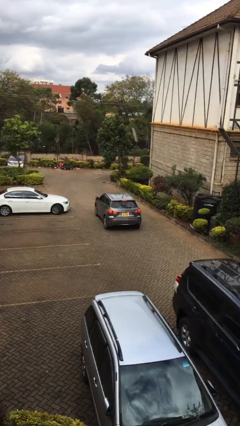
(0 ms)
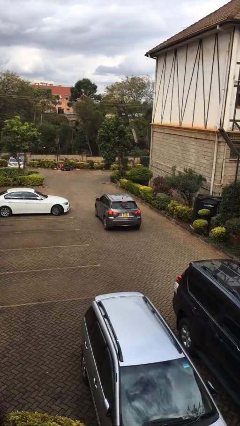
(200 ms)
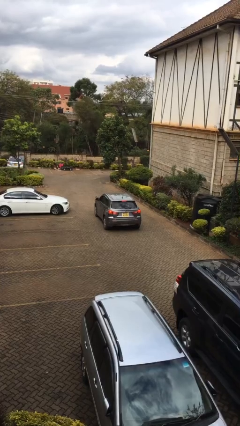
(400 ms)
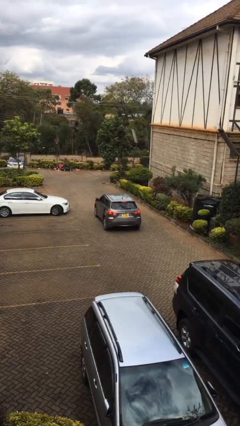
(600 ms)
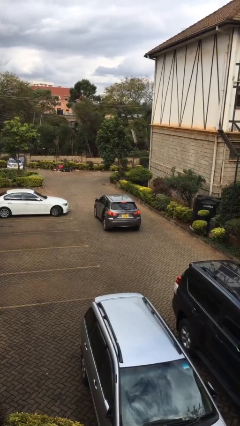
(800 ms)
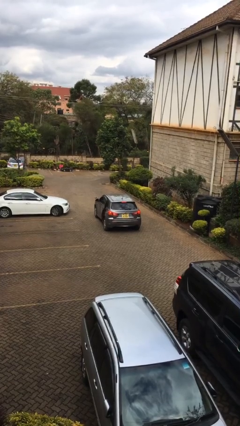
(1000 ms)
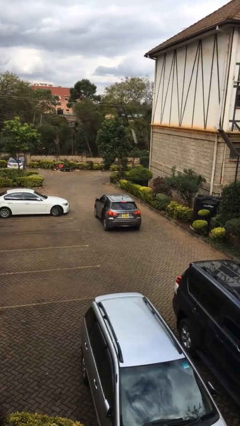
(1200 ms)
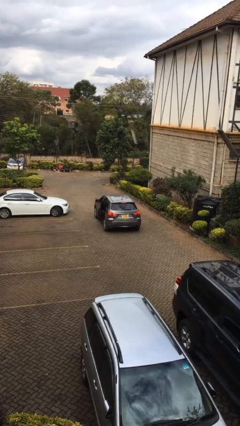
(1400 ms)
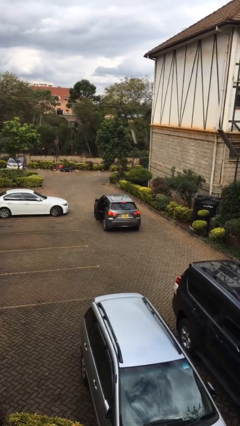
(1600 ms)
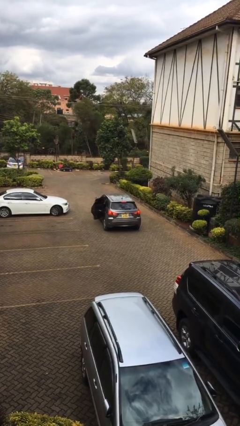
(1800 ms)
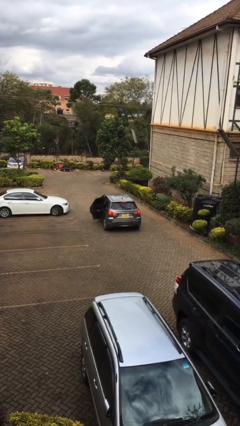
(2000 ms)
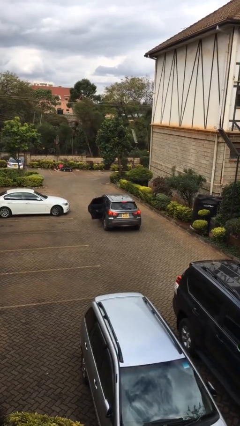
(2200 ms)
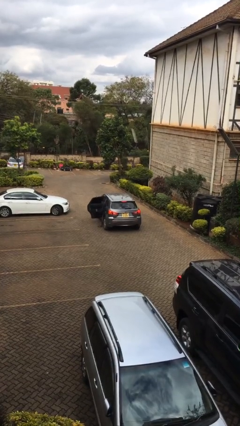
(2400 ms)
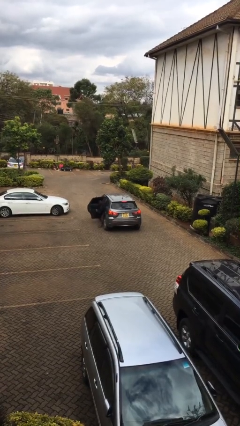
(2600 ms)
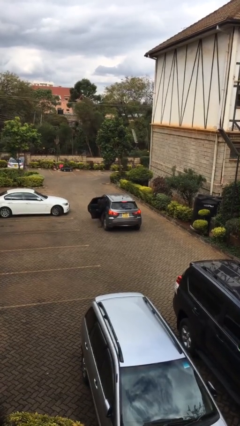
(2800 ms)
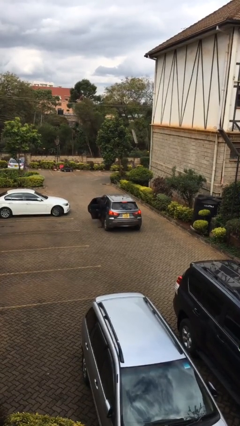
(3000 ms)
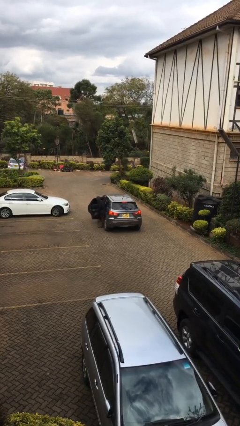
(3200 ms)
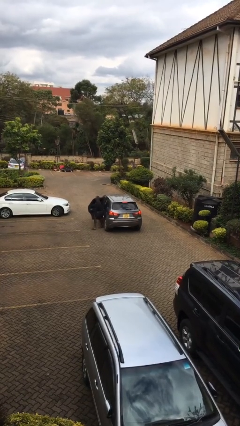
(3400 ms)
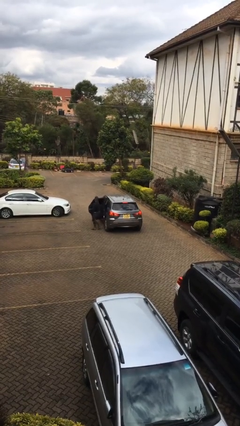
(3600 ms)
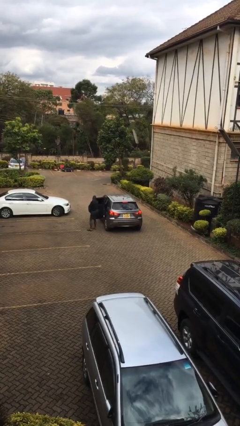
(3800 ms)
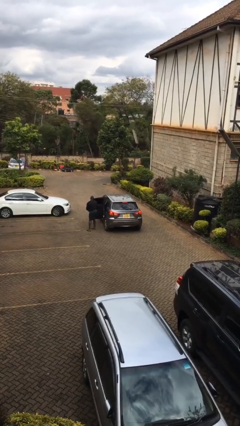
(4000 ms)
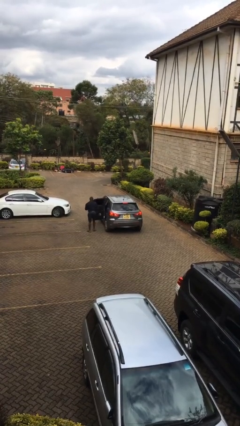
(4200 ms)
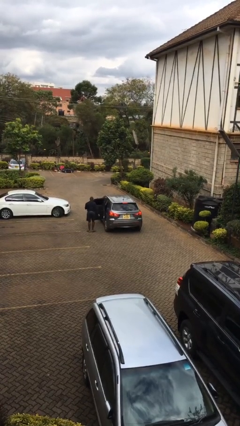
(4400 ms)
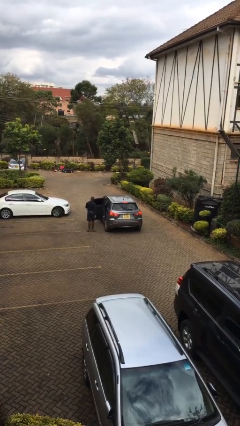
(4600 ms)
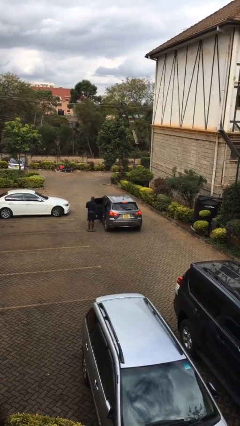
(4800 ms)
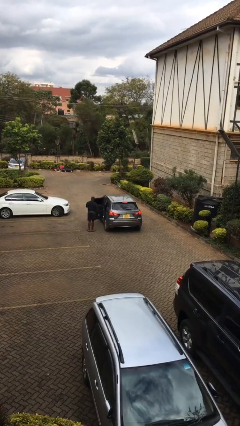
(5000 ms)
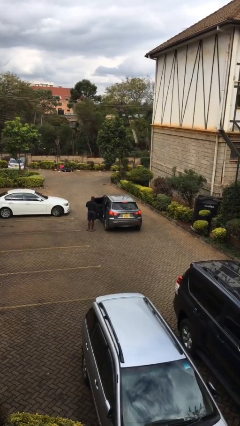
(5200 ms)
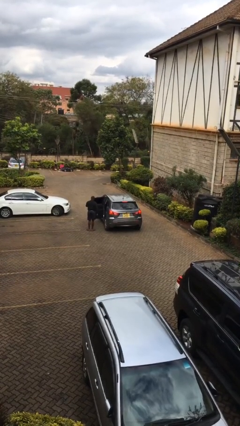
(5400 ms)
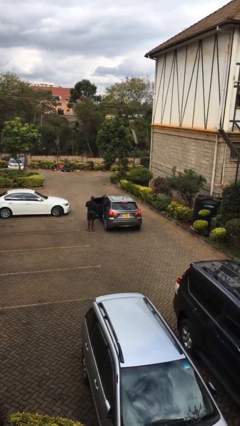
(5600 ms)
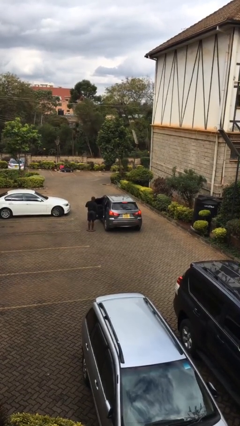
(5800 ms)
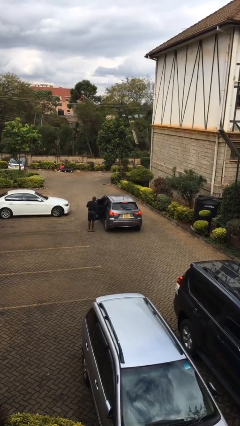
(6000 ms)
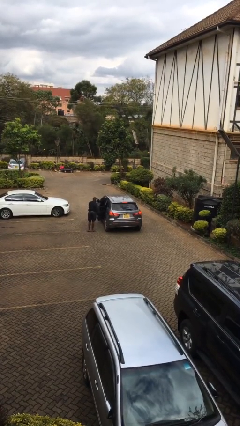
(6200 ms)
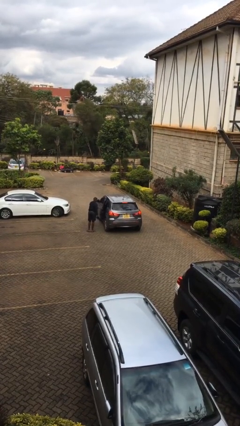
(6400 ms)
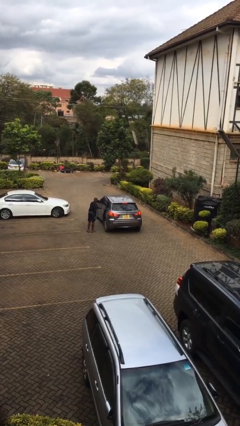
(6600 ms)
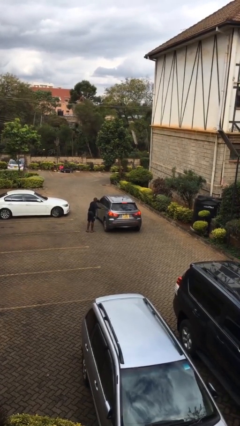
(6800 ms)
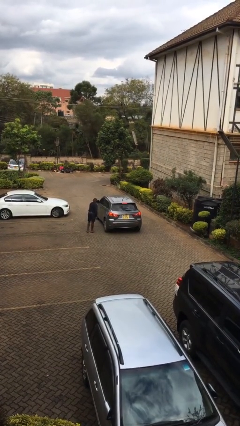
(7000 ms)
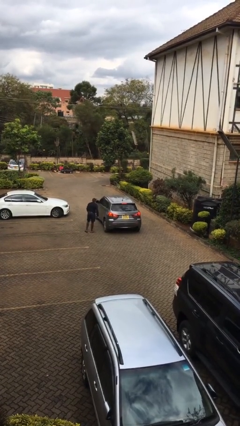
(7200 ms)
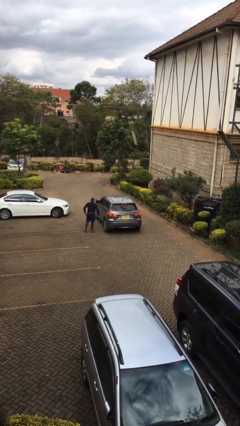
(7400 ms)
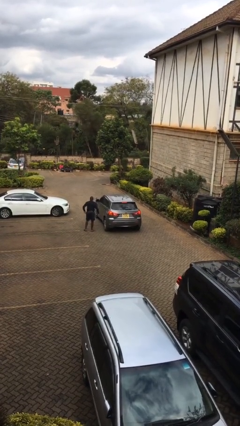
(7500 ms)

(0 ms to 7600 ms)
car drops off person

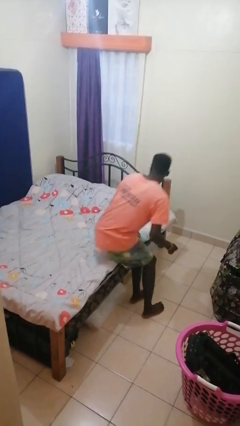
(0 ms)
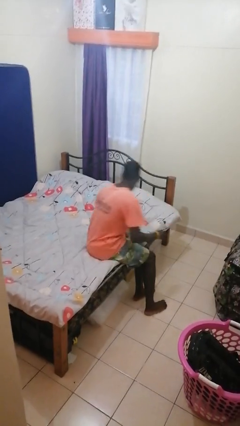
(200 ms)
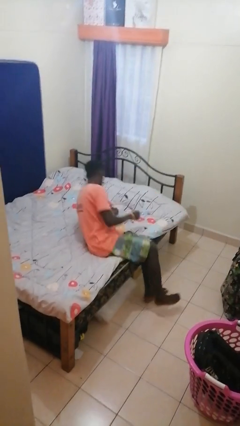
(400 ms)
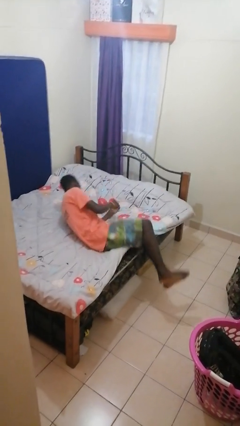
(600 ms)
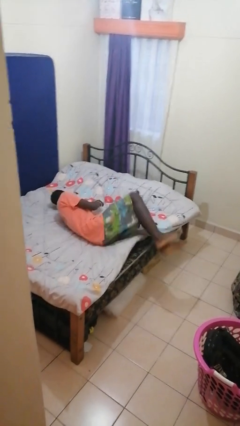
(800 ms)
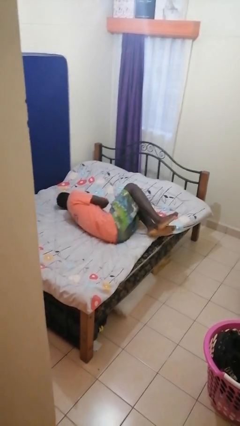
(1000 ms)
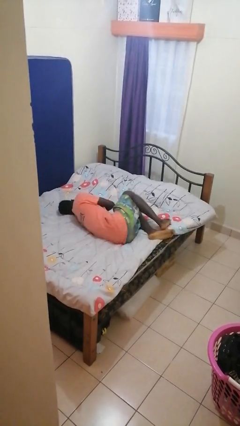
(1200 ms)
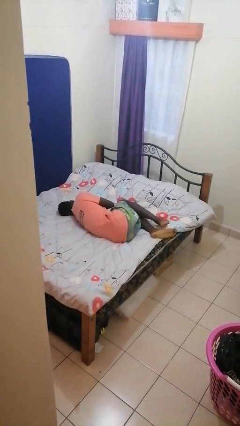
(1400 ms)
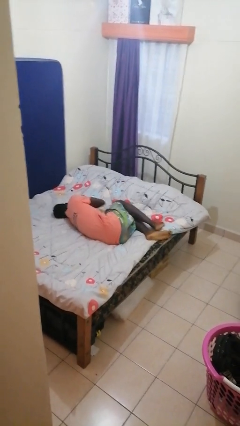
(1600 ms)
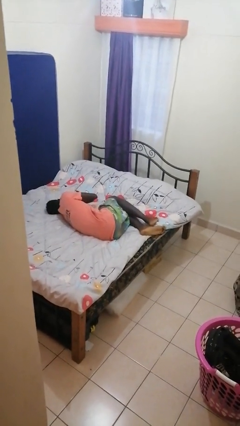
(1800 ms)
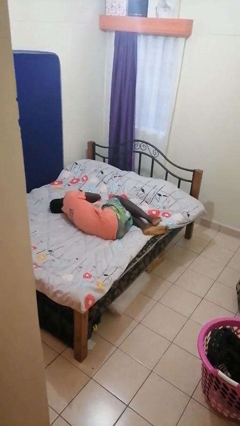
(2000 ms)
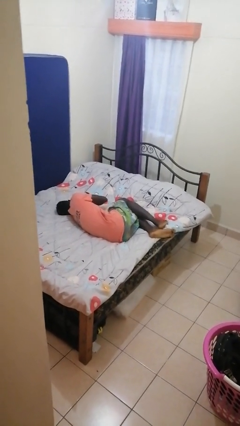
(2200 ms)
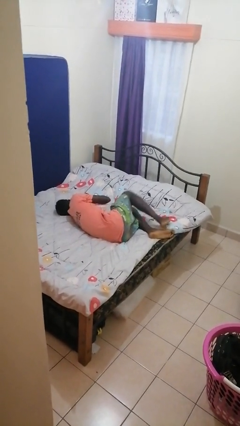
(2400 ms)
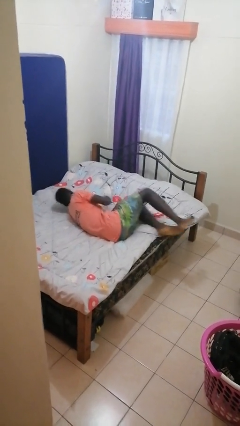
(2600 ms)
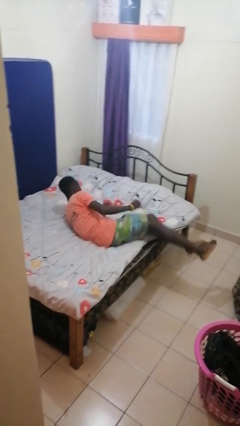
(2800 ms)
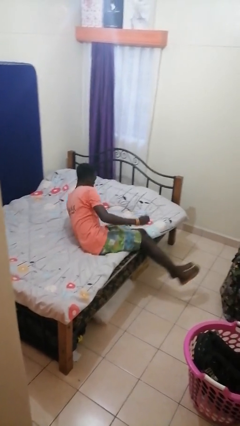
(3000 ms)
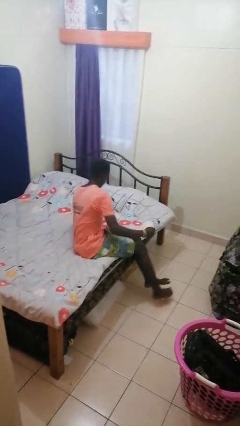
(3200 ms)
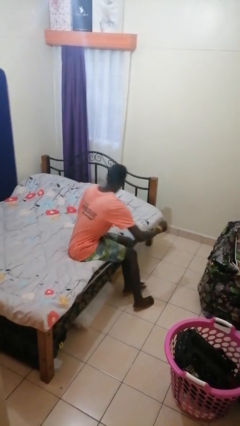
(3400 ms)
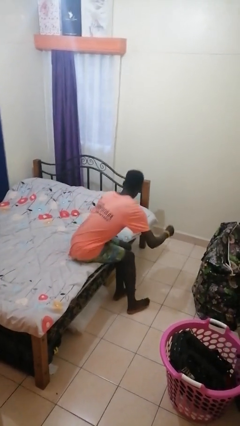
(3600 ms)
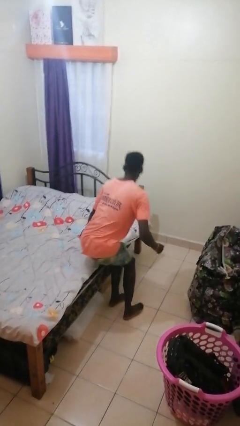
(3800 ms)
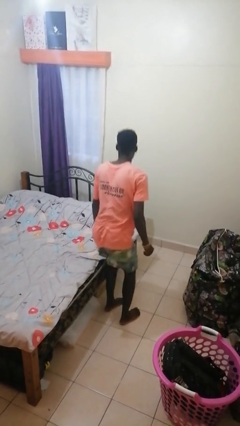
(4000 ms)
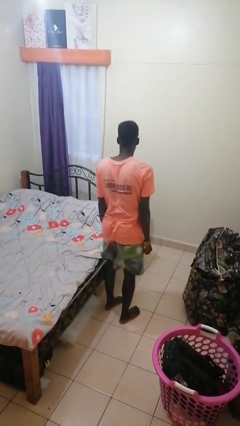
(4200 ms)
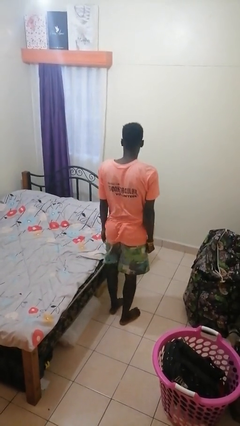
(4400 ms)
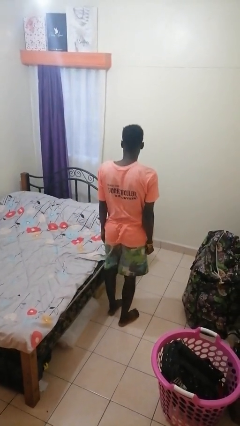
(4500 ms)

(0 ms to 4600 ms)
person takes off shoes

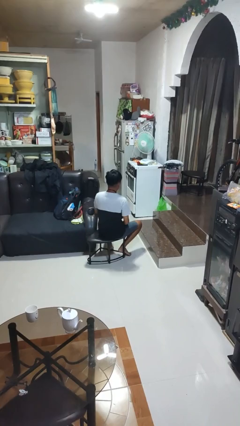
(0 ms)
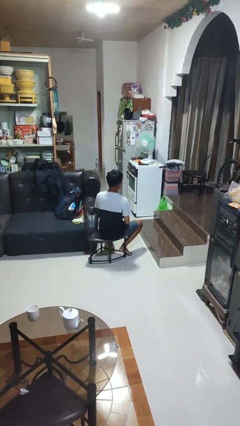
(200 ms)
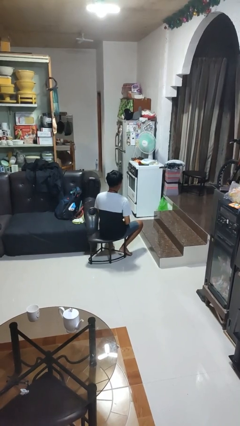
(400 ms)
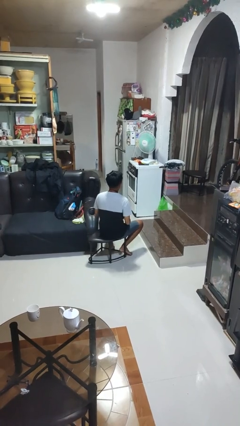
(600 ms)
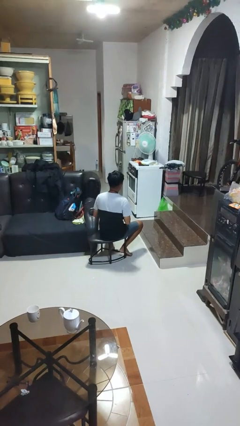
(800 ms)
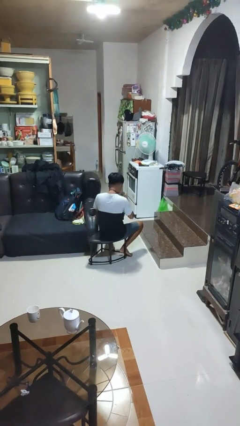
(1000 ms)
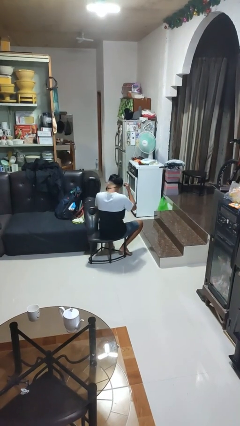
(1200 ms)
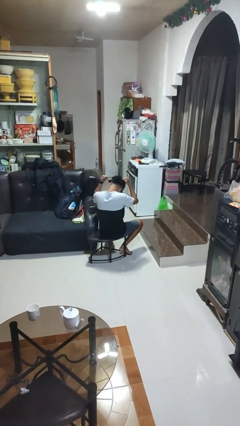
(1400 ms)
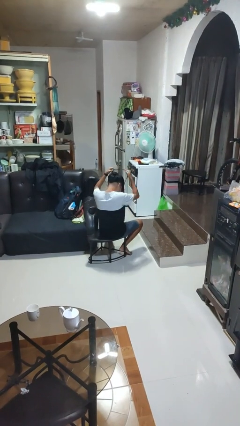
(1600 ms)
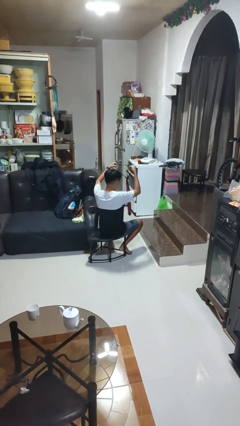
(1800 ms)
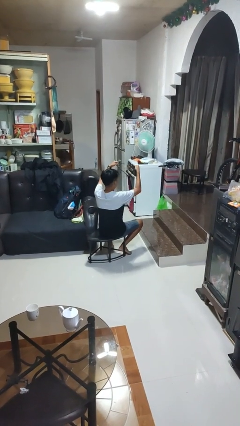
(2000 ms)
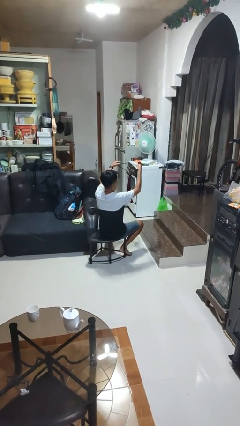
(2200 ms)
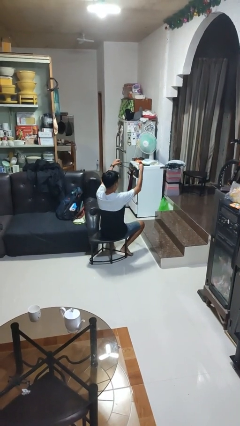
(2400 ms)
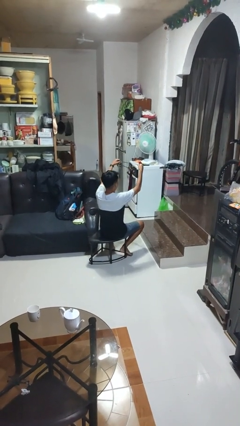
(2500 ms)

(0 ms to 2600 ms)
person takes off necktie

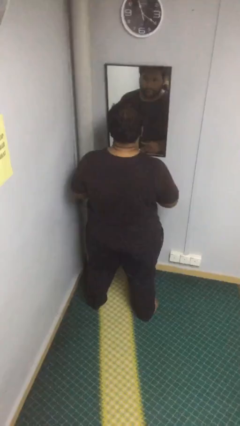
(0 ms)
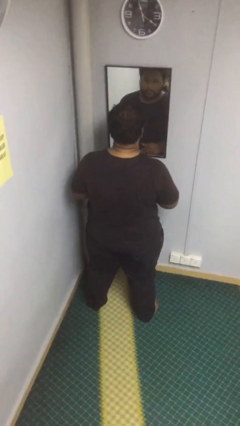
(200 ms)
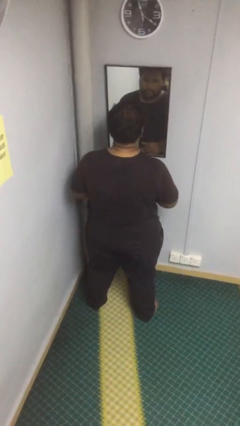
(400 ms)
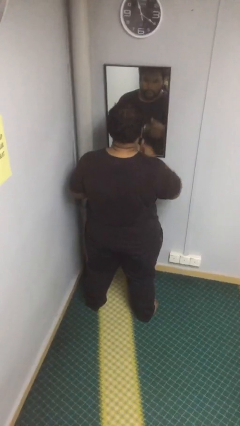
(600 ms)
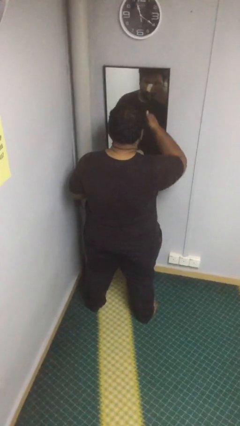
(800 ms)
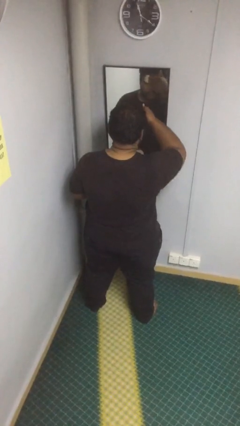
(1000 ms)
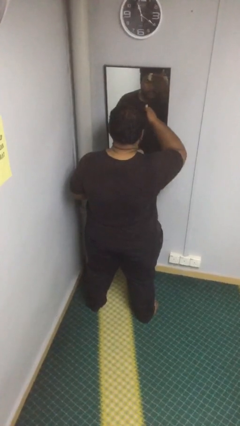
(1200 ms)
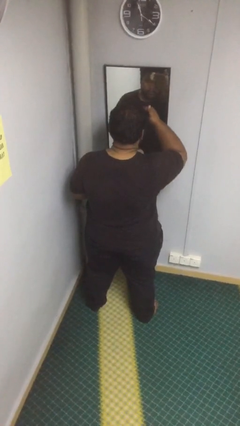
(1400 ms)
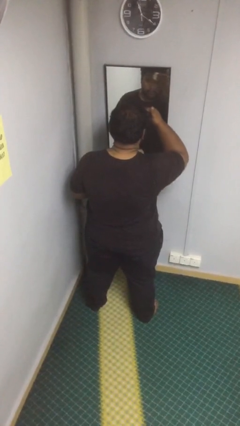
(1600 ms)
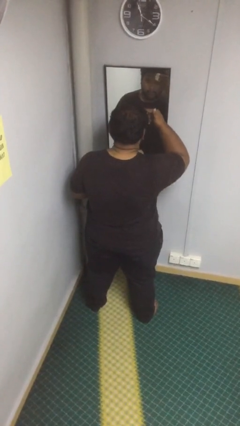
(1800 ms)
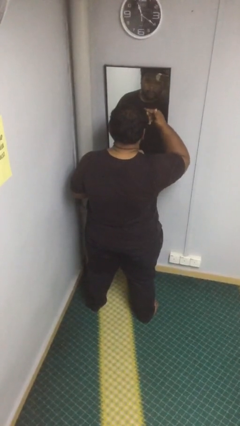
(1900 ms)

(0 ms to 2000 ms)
person applies foundation makeup

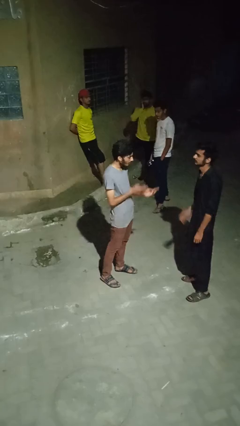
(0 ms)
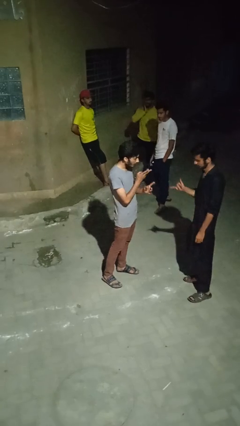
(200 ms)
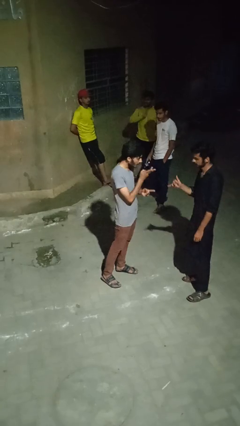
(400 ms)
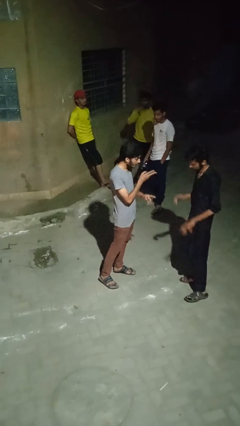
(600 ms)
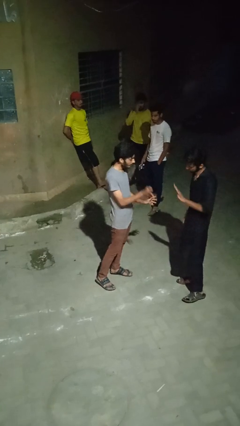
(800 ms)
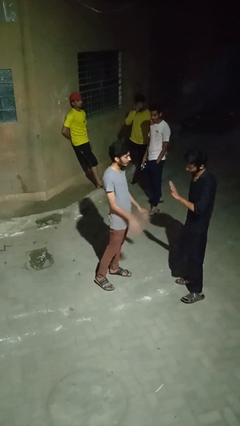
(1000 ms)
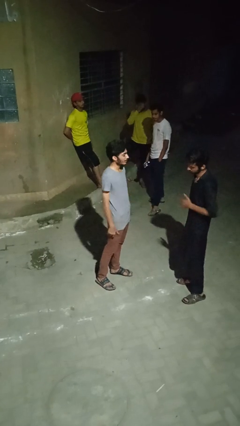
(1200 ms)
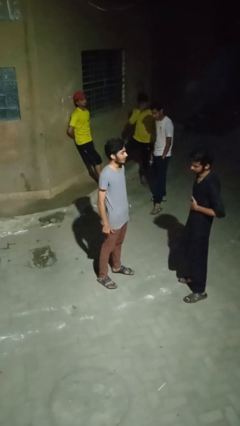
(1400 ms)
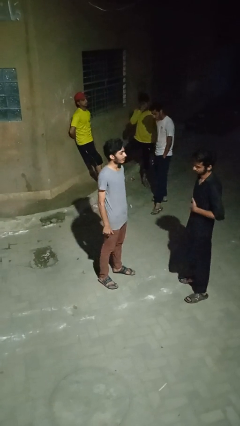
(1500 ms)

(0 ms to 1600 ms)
person talks to person
